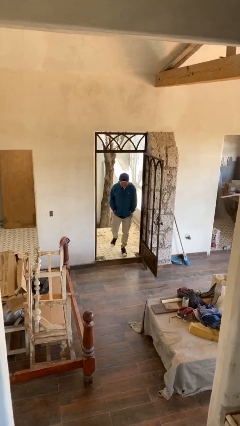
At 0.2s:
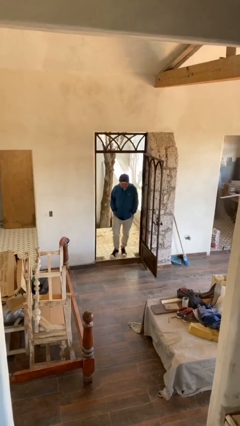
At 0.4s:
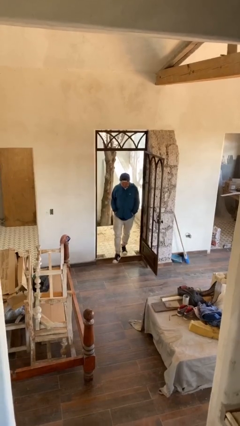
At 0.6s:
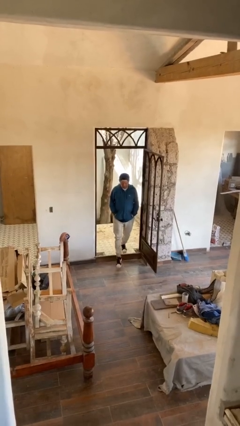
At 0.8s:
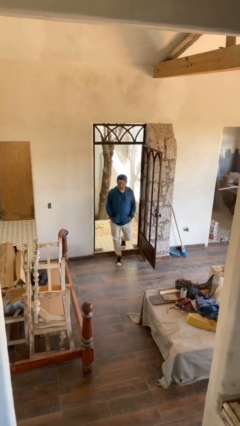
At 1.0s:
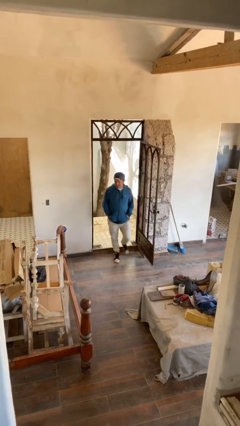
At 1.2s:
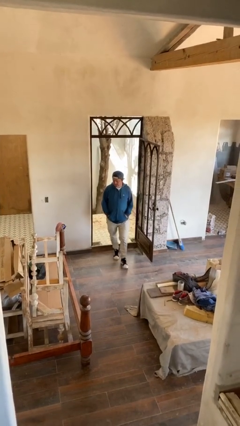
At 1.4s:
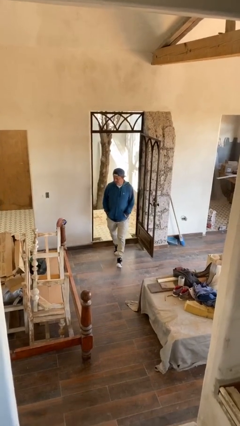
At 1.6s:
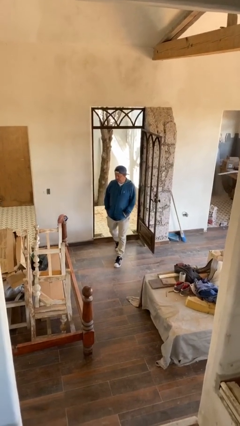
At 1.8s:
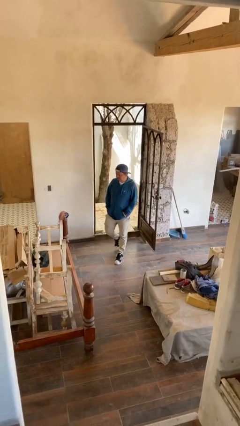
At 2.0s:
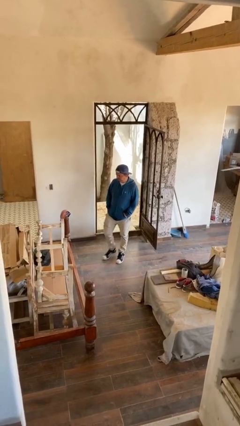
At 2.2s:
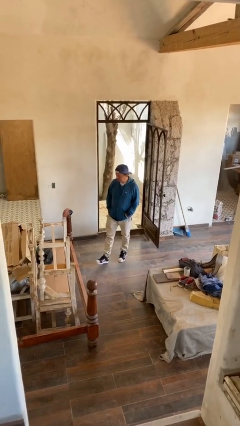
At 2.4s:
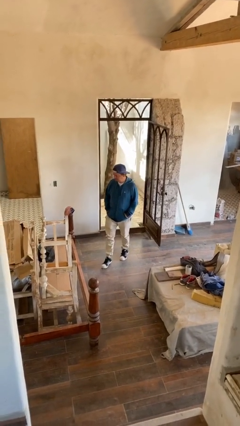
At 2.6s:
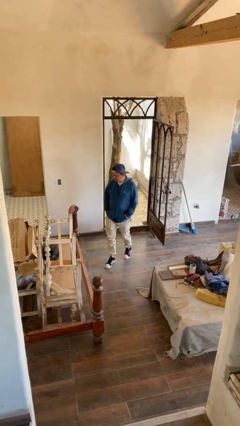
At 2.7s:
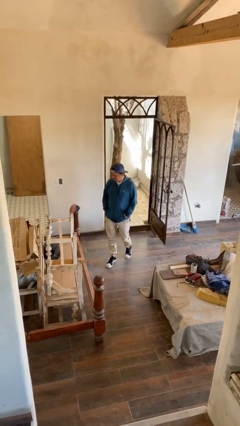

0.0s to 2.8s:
person enters scene through structure

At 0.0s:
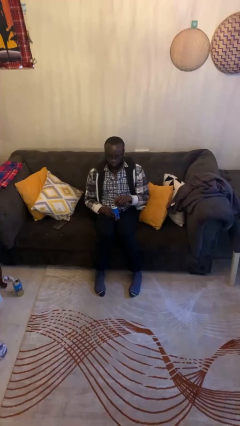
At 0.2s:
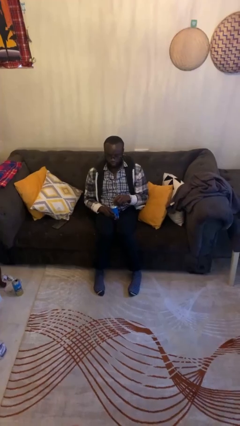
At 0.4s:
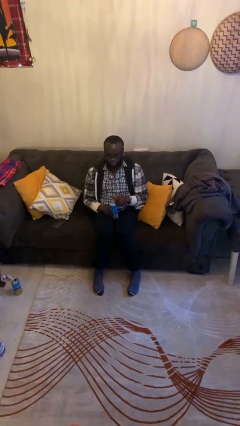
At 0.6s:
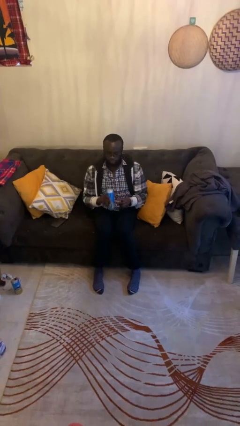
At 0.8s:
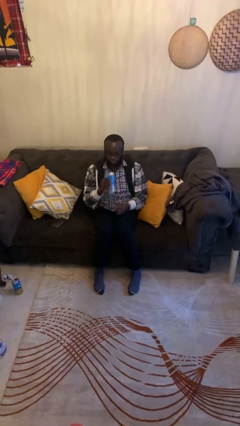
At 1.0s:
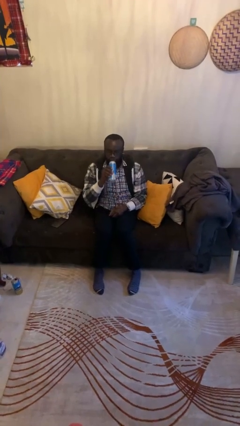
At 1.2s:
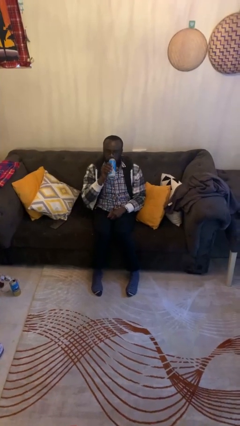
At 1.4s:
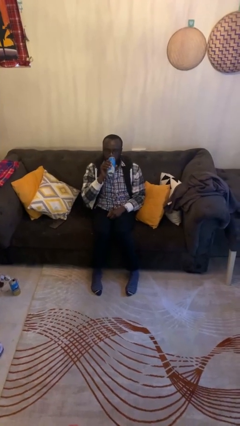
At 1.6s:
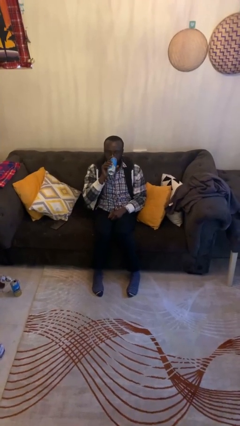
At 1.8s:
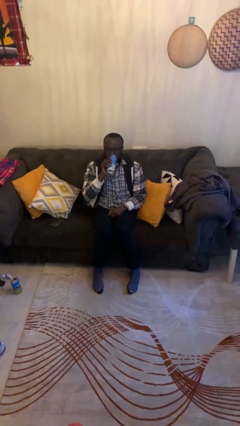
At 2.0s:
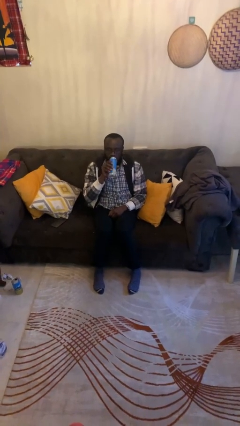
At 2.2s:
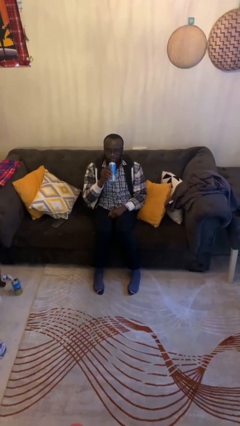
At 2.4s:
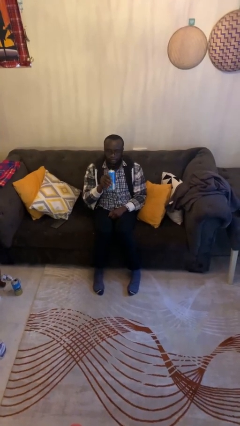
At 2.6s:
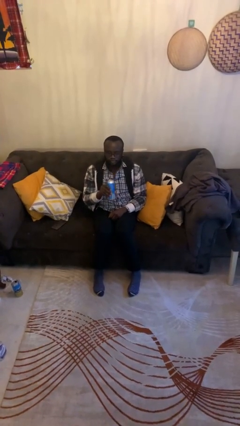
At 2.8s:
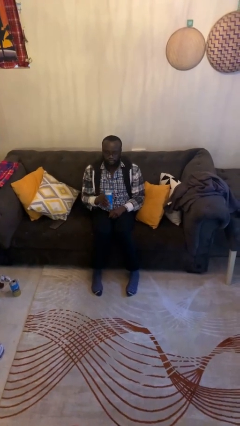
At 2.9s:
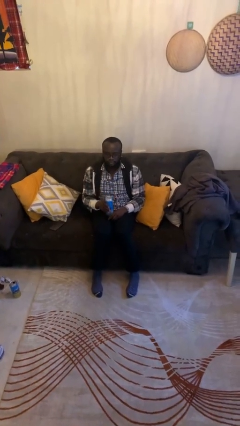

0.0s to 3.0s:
person drinks from beverage can

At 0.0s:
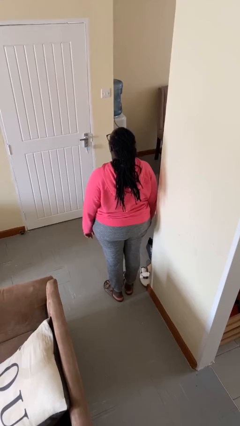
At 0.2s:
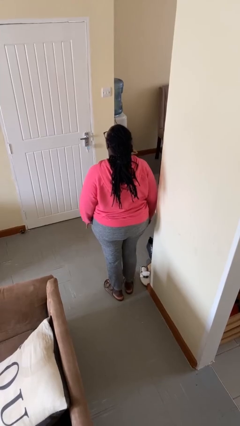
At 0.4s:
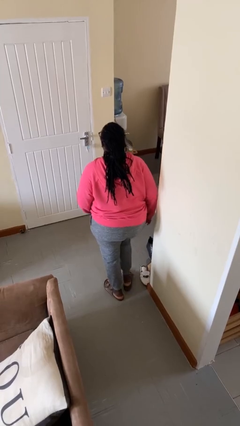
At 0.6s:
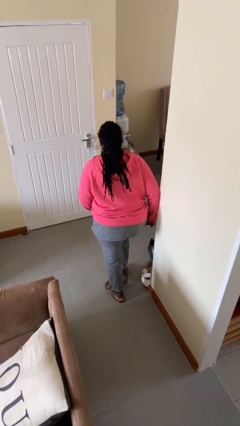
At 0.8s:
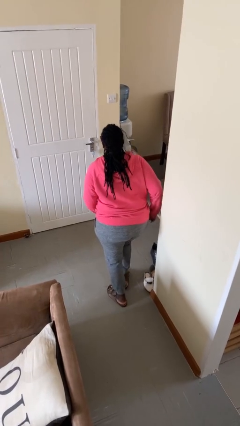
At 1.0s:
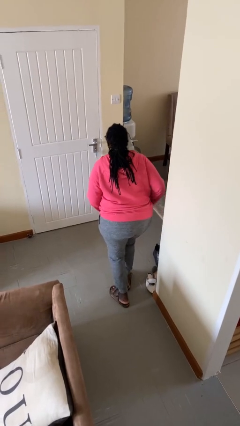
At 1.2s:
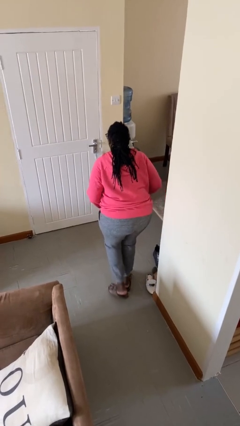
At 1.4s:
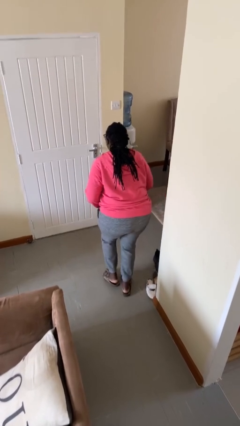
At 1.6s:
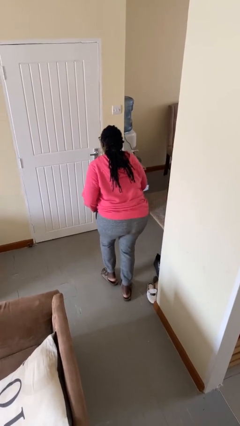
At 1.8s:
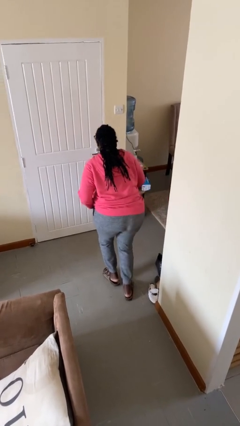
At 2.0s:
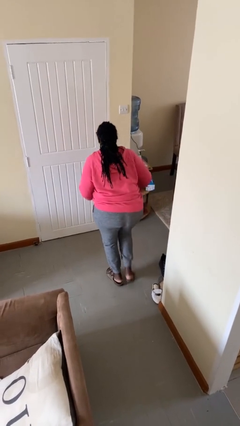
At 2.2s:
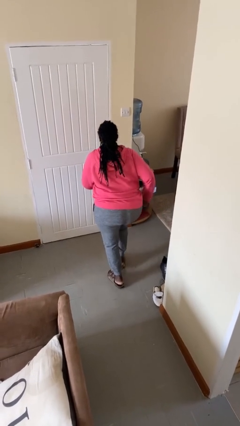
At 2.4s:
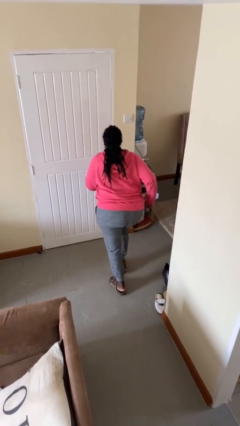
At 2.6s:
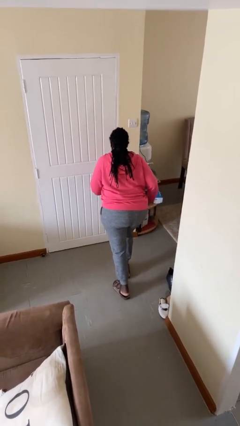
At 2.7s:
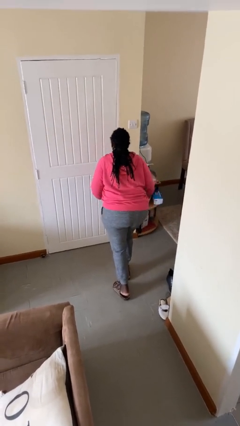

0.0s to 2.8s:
person walks tiptoe

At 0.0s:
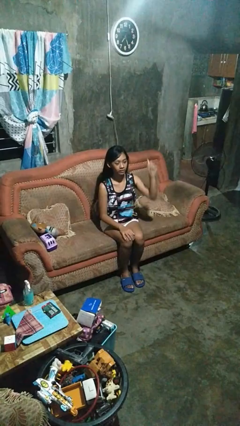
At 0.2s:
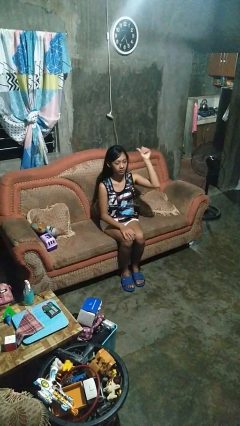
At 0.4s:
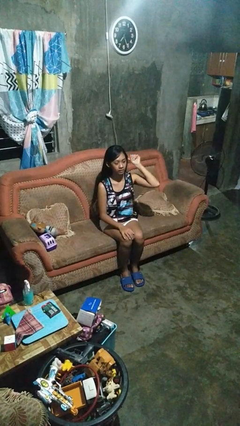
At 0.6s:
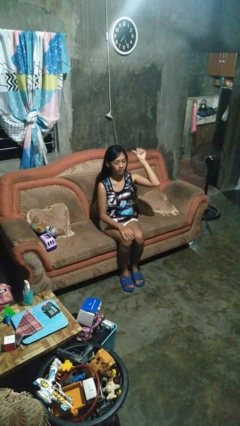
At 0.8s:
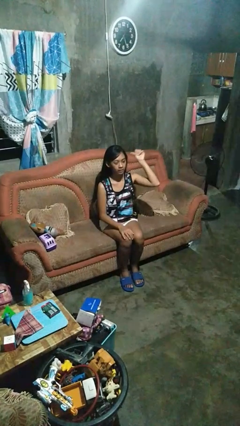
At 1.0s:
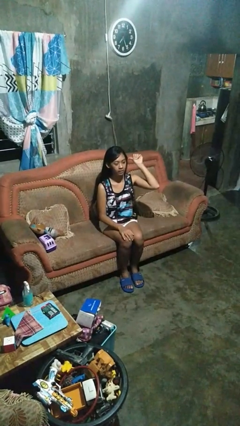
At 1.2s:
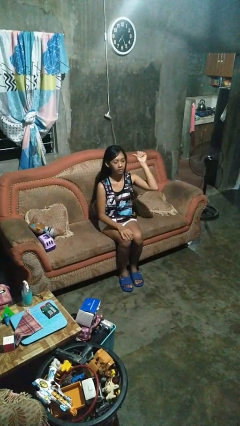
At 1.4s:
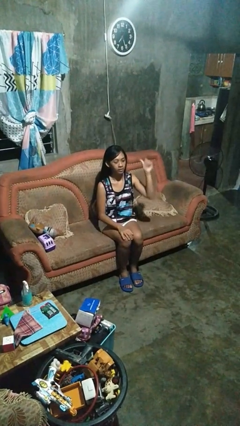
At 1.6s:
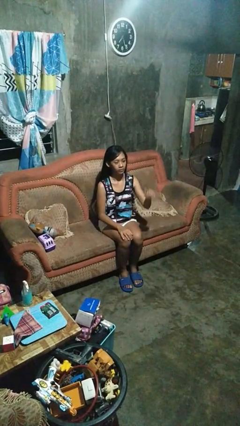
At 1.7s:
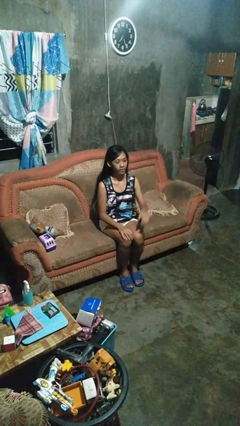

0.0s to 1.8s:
person gestures behind me

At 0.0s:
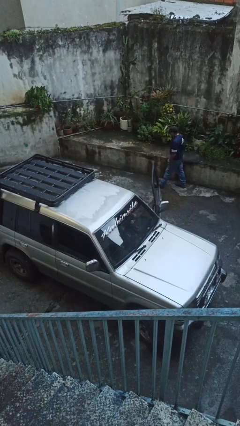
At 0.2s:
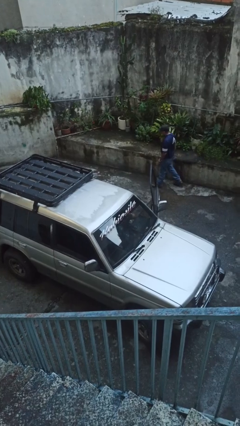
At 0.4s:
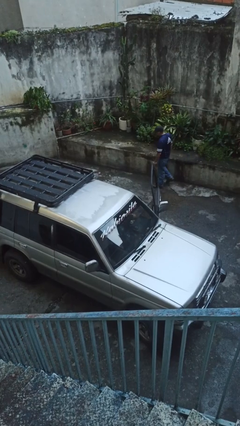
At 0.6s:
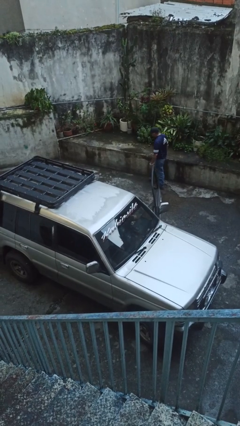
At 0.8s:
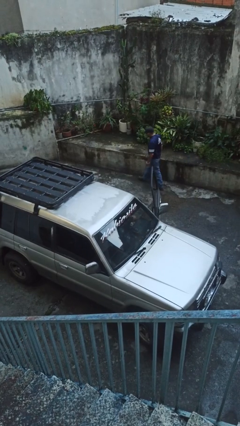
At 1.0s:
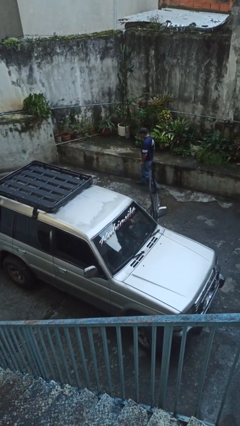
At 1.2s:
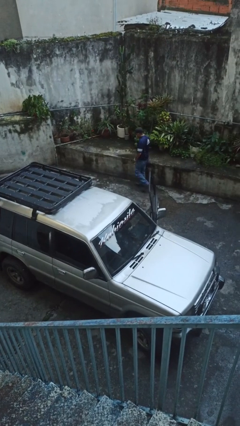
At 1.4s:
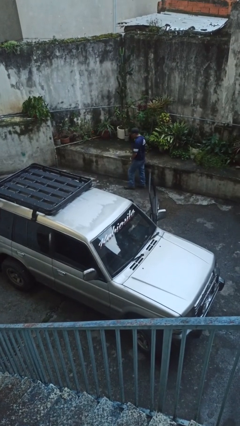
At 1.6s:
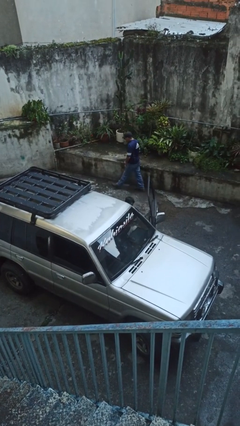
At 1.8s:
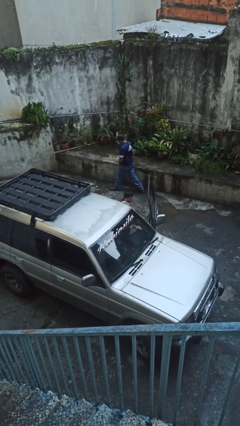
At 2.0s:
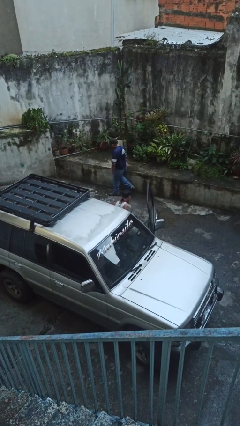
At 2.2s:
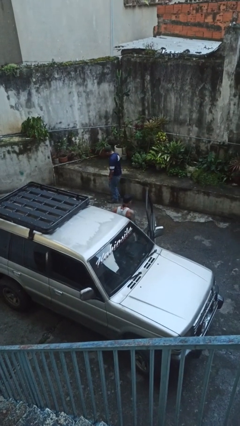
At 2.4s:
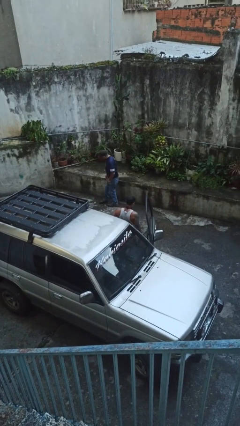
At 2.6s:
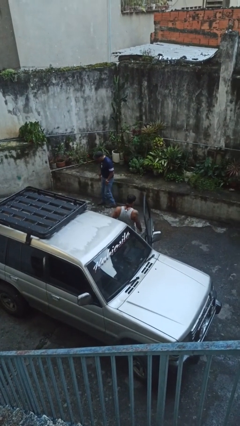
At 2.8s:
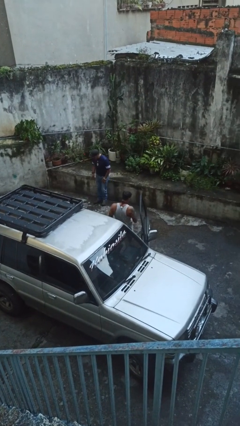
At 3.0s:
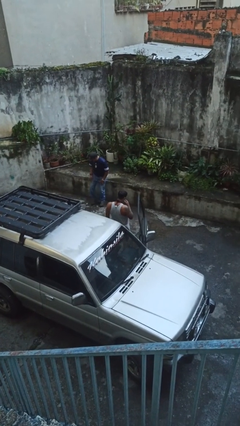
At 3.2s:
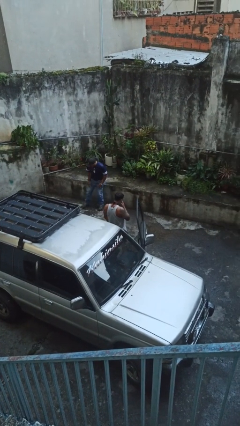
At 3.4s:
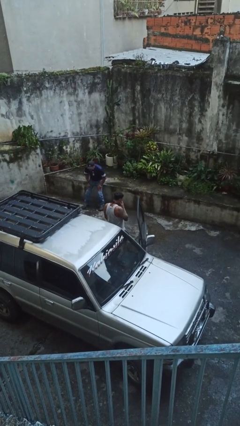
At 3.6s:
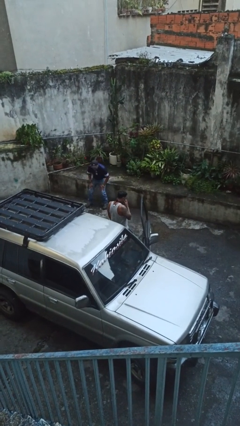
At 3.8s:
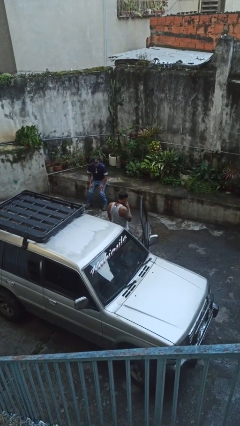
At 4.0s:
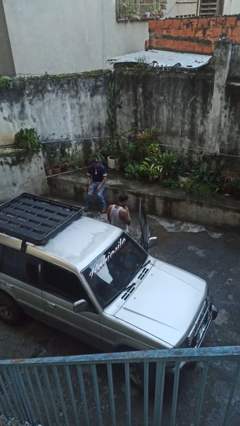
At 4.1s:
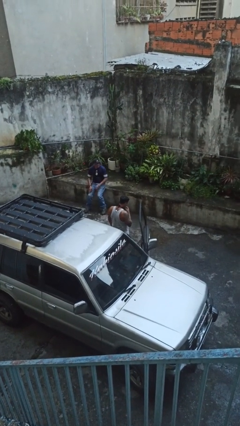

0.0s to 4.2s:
person exits car

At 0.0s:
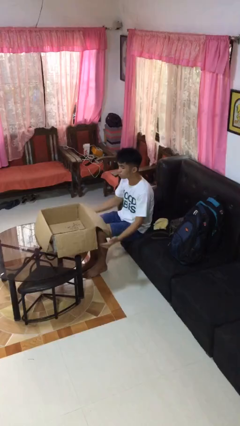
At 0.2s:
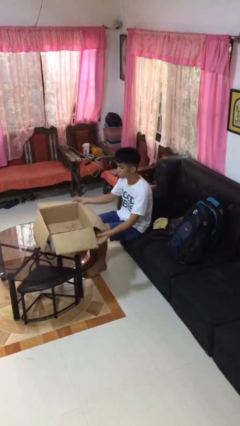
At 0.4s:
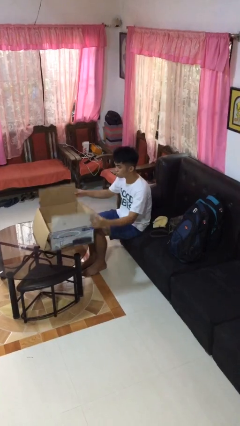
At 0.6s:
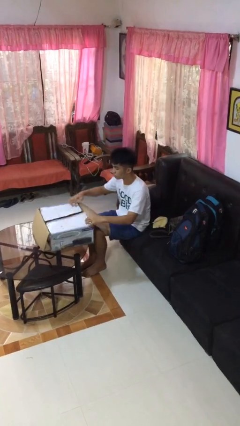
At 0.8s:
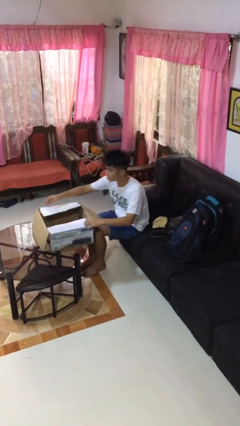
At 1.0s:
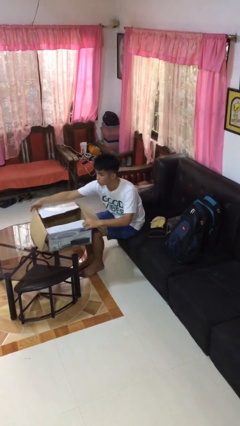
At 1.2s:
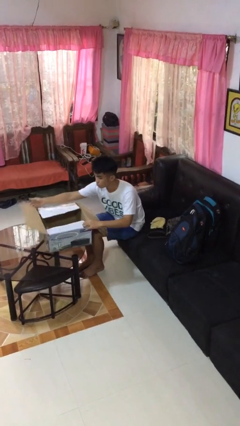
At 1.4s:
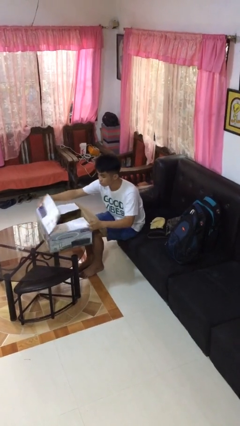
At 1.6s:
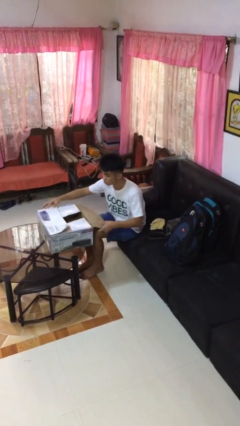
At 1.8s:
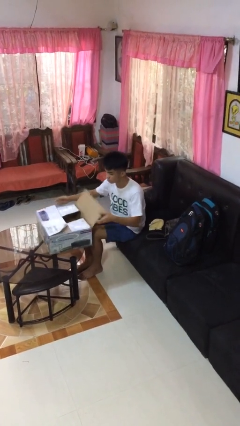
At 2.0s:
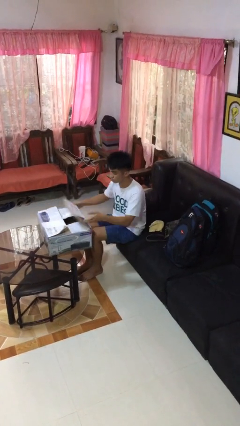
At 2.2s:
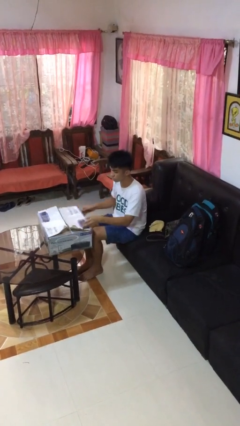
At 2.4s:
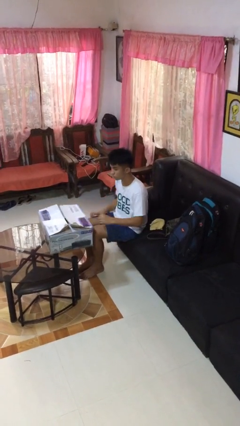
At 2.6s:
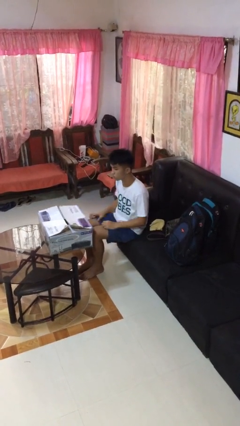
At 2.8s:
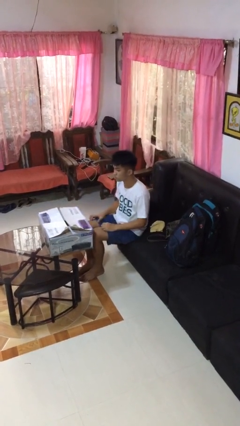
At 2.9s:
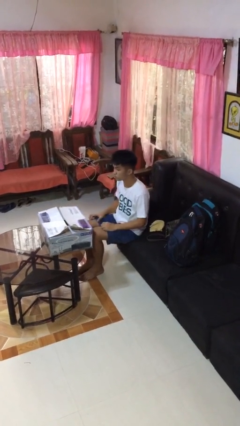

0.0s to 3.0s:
person closes box

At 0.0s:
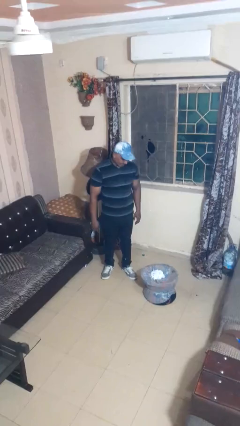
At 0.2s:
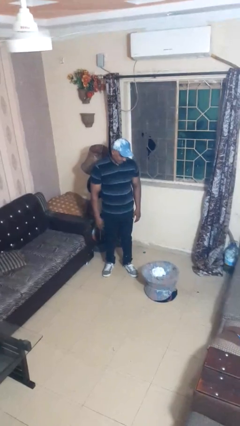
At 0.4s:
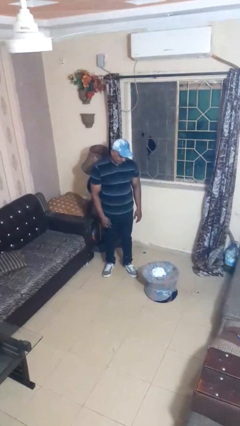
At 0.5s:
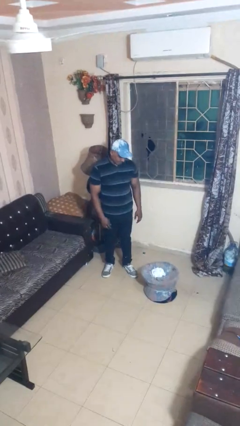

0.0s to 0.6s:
person takes object from basket
